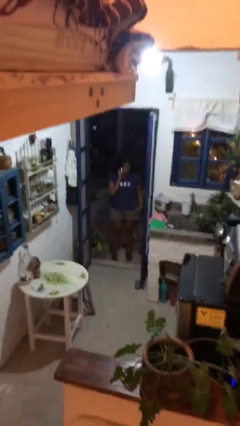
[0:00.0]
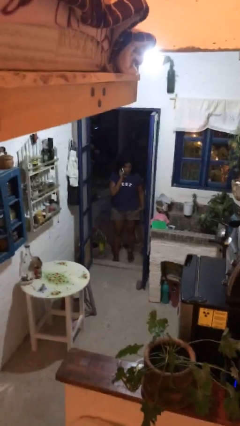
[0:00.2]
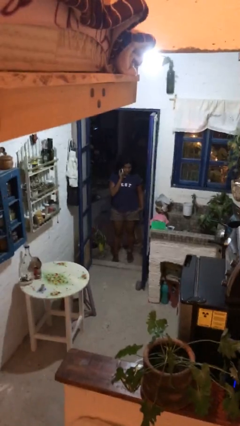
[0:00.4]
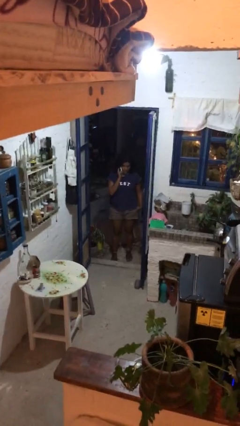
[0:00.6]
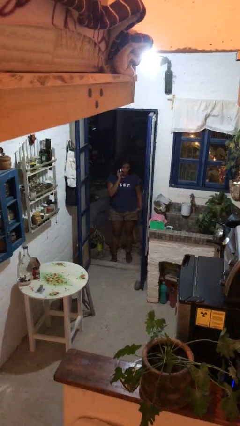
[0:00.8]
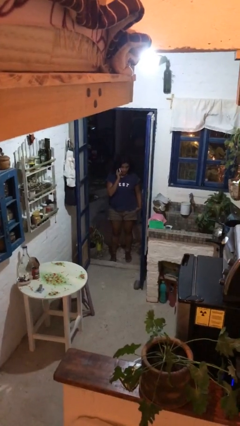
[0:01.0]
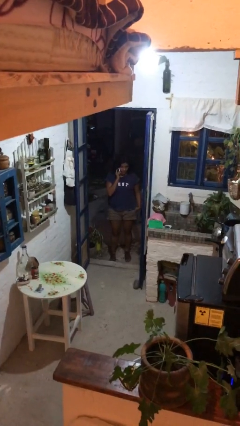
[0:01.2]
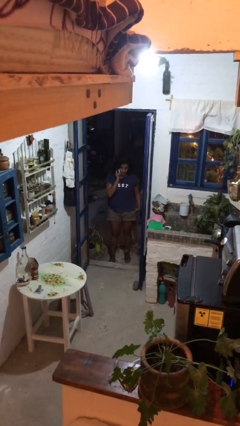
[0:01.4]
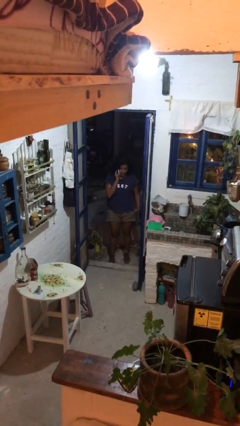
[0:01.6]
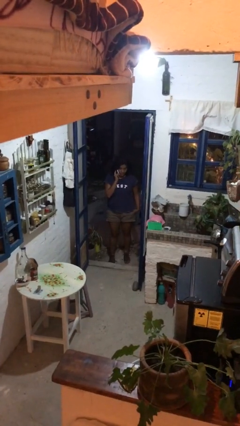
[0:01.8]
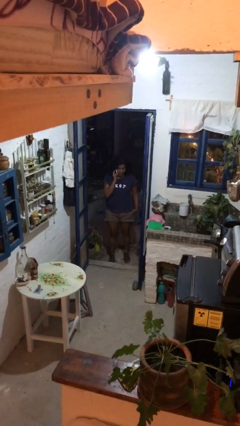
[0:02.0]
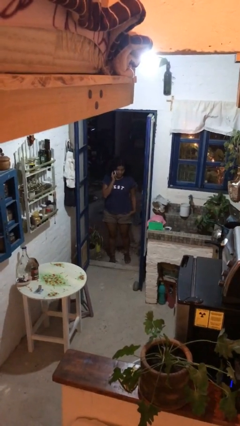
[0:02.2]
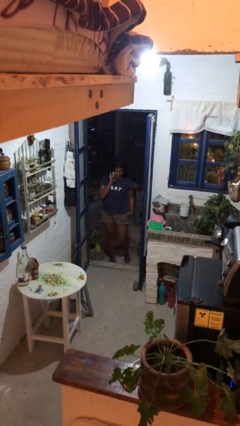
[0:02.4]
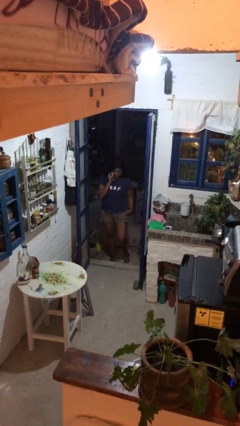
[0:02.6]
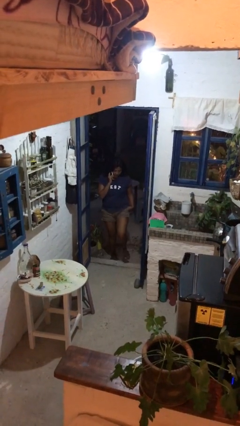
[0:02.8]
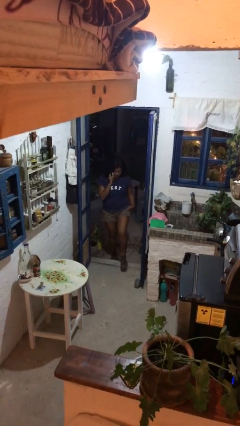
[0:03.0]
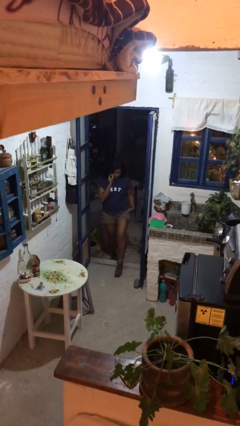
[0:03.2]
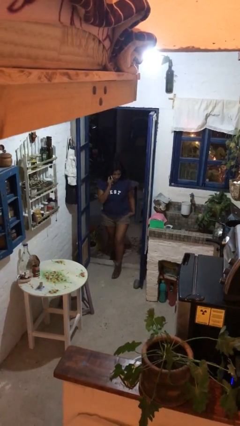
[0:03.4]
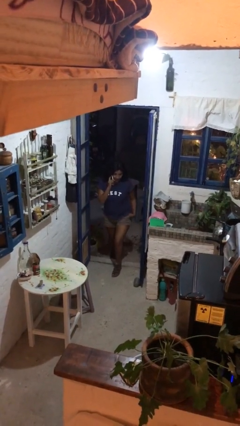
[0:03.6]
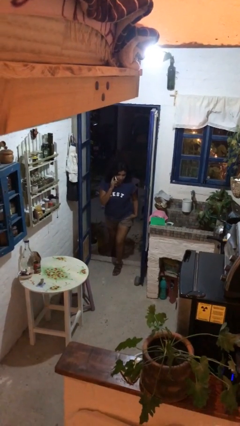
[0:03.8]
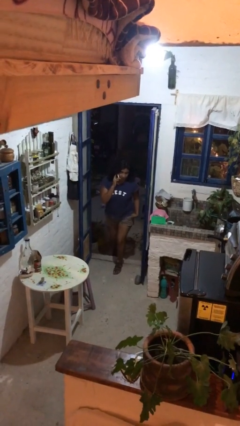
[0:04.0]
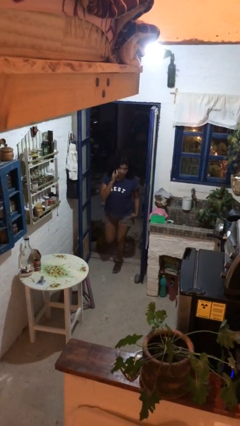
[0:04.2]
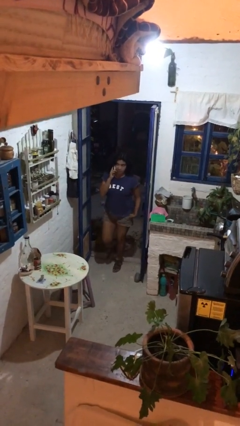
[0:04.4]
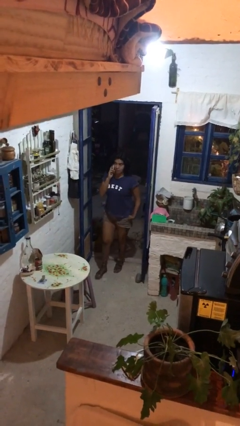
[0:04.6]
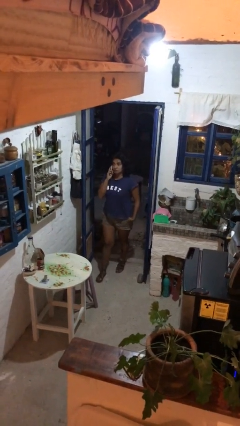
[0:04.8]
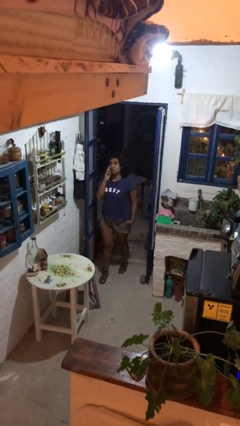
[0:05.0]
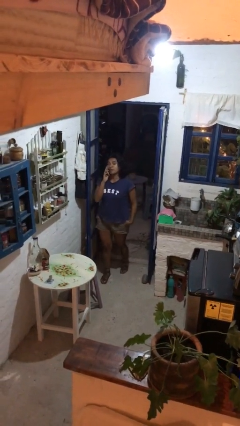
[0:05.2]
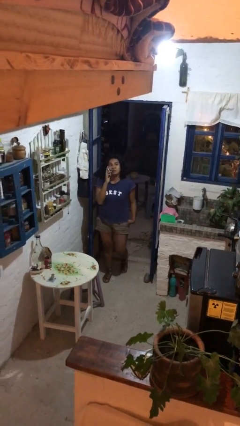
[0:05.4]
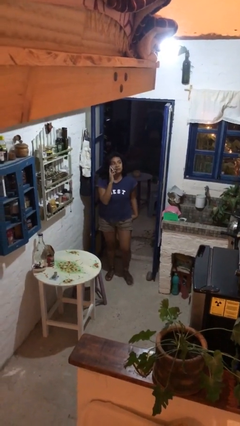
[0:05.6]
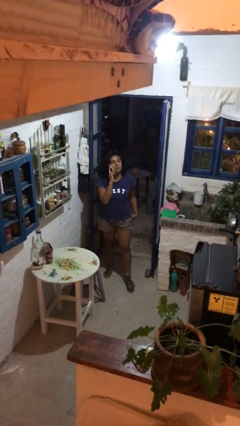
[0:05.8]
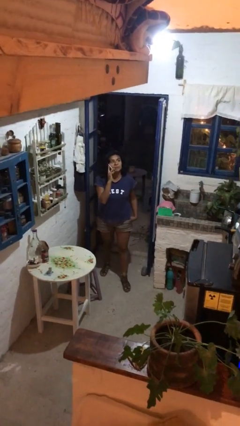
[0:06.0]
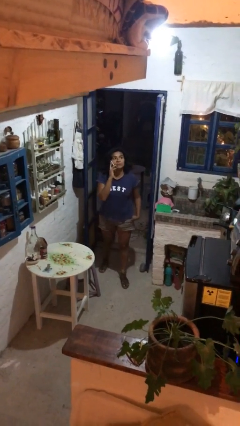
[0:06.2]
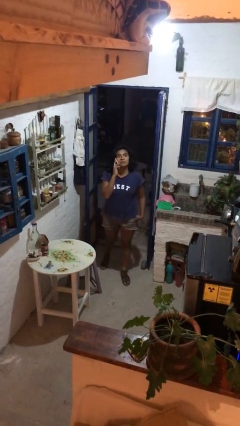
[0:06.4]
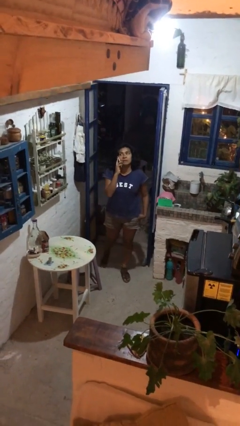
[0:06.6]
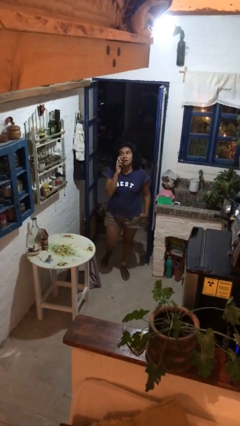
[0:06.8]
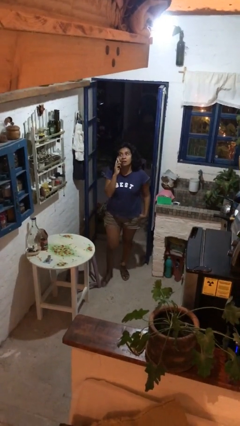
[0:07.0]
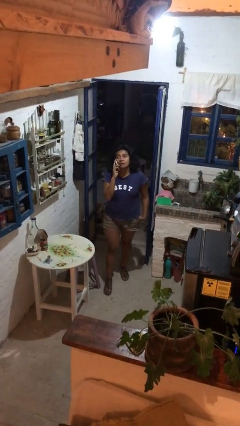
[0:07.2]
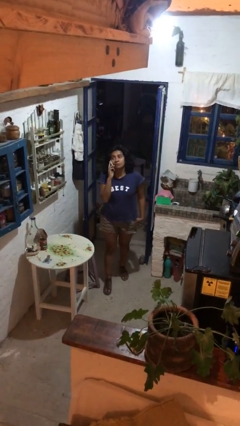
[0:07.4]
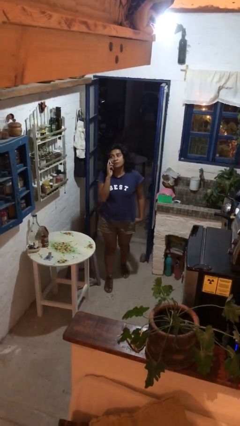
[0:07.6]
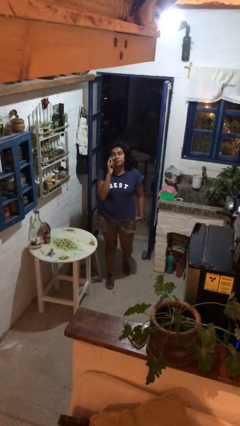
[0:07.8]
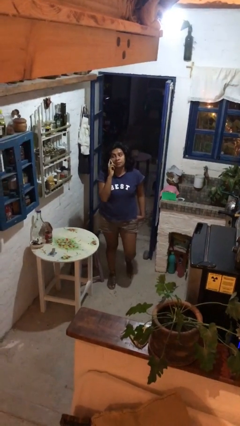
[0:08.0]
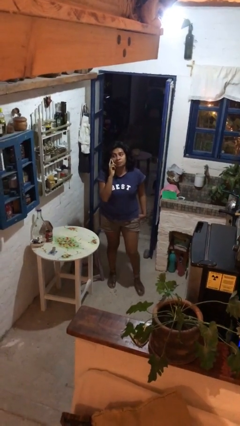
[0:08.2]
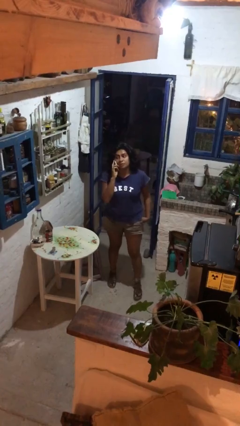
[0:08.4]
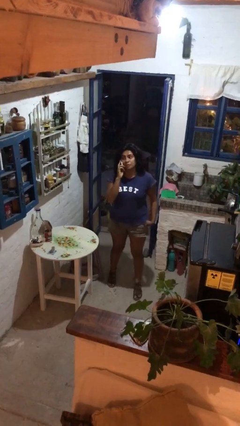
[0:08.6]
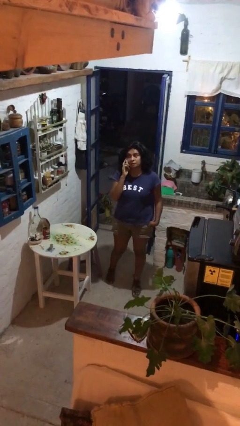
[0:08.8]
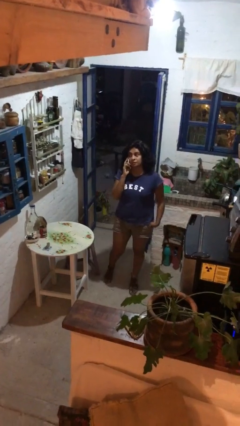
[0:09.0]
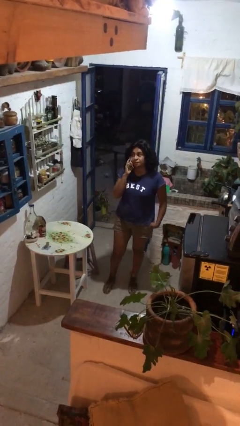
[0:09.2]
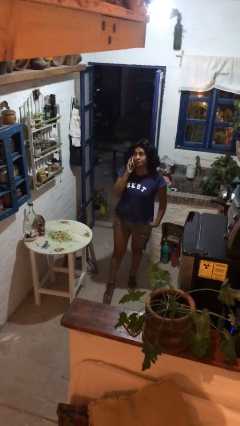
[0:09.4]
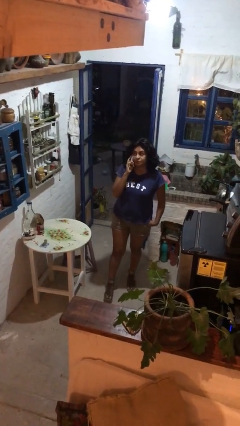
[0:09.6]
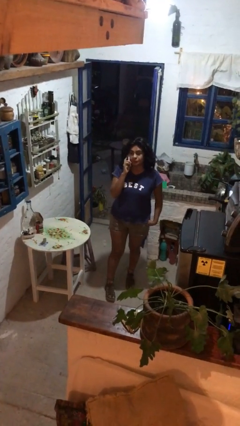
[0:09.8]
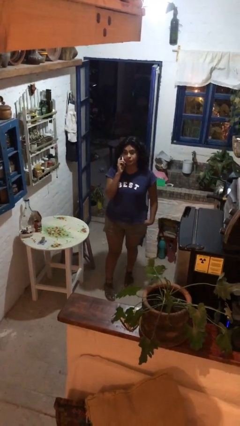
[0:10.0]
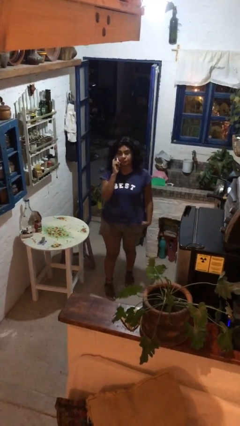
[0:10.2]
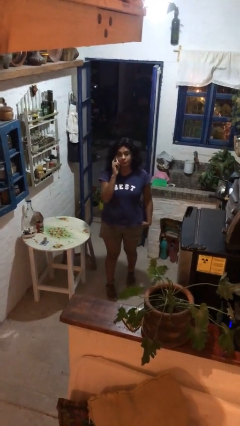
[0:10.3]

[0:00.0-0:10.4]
person enters scene through structure

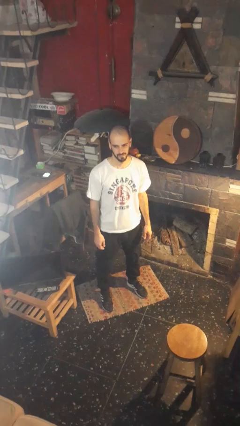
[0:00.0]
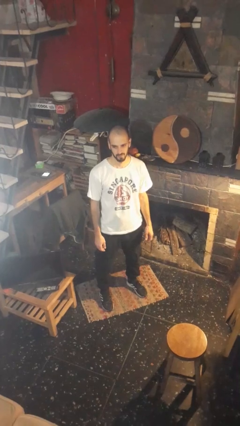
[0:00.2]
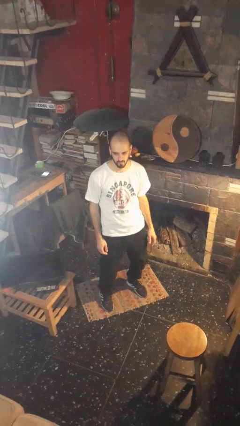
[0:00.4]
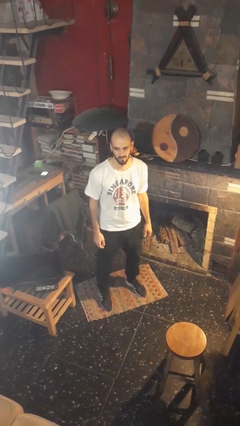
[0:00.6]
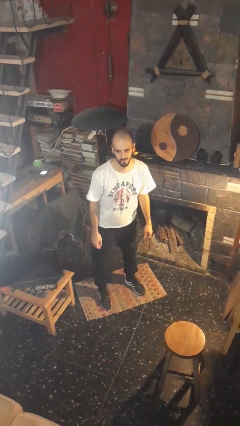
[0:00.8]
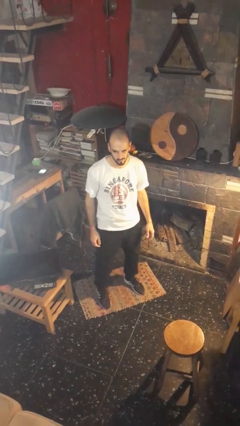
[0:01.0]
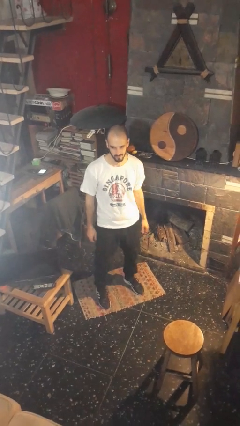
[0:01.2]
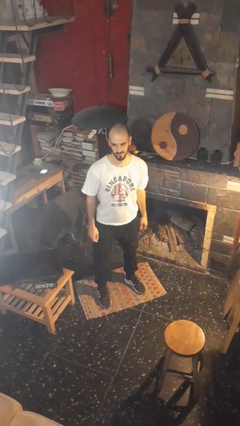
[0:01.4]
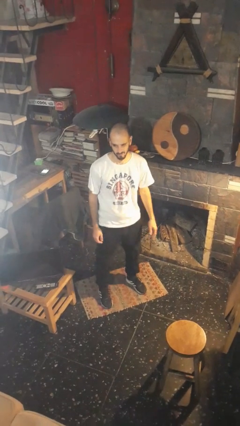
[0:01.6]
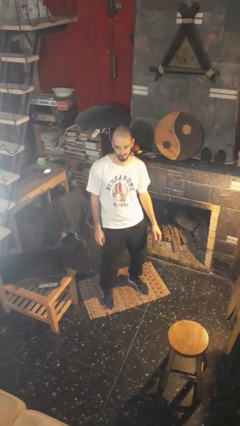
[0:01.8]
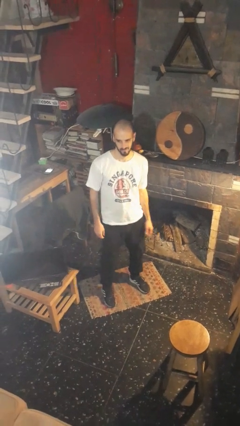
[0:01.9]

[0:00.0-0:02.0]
person wiggles hips

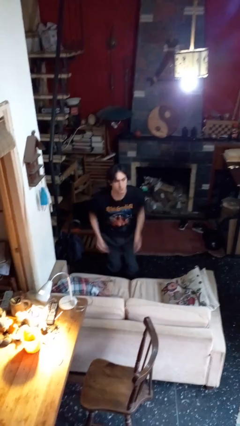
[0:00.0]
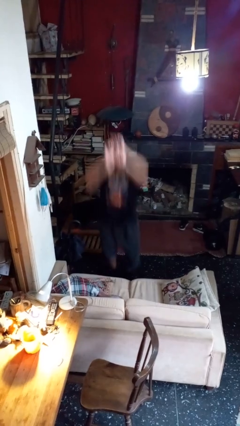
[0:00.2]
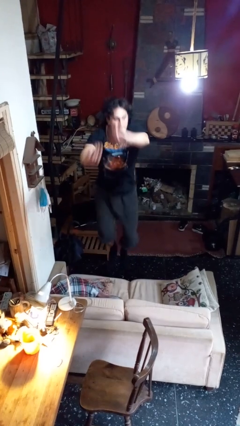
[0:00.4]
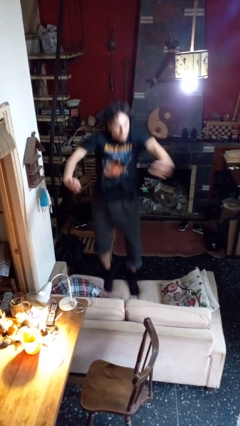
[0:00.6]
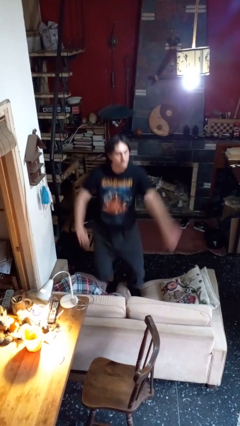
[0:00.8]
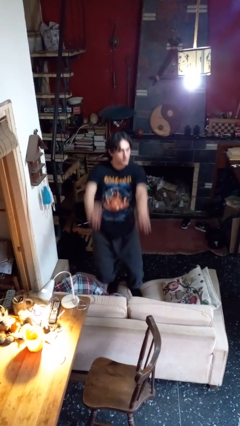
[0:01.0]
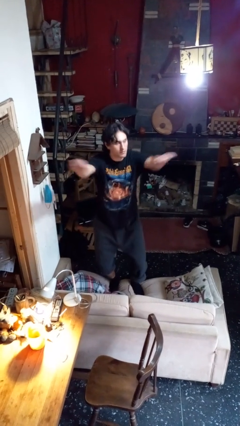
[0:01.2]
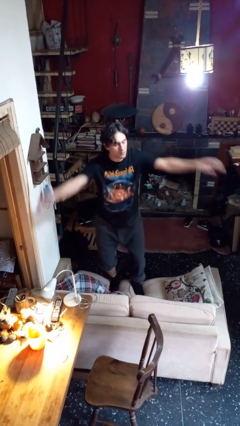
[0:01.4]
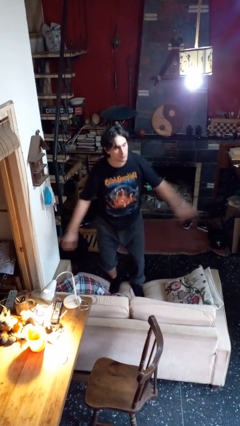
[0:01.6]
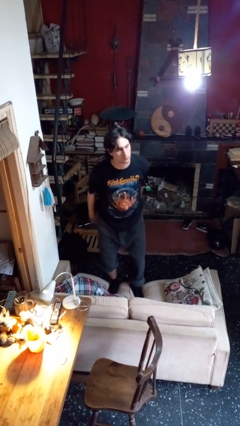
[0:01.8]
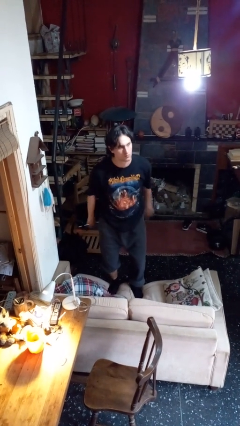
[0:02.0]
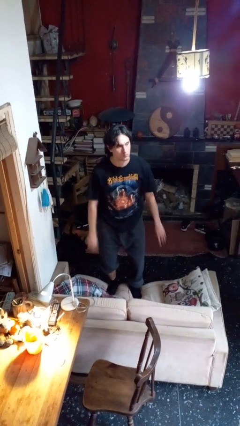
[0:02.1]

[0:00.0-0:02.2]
person climbs on couch

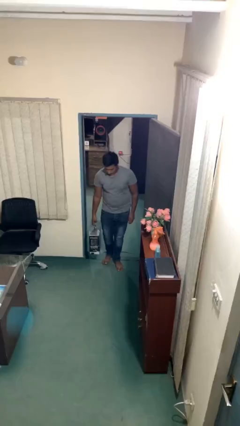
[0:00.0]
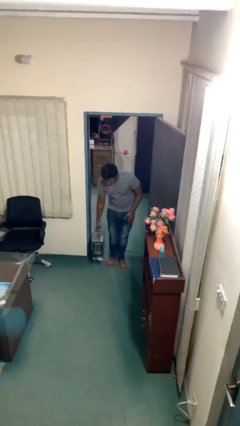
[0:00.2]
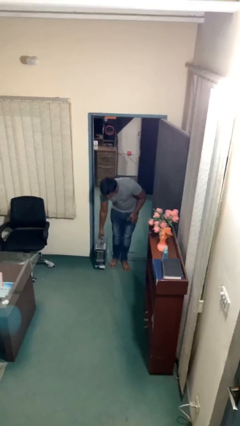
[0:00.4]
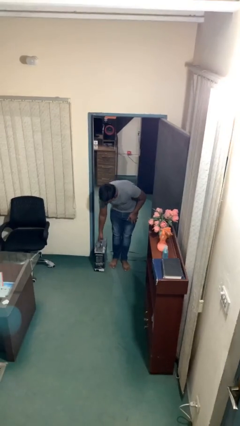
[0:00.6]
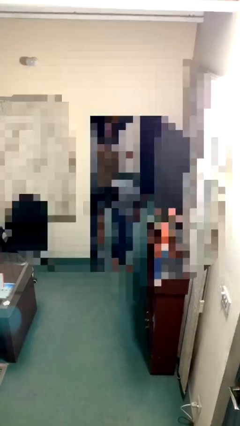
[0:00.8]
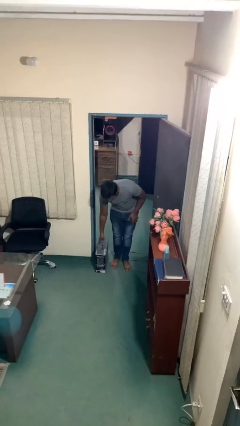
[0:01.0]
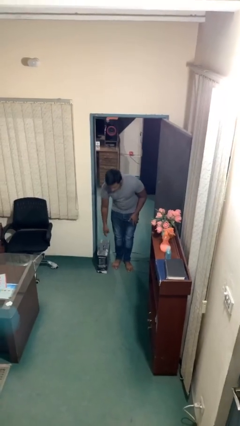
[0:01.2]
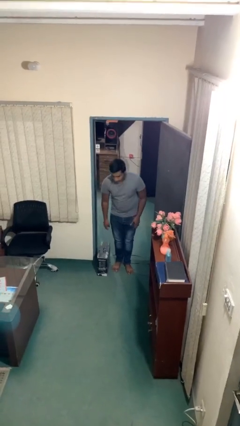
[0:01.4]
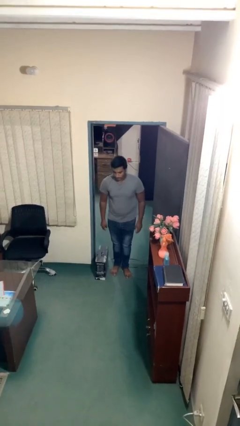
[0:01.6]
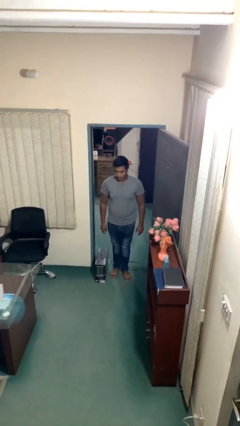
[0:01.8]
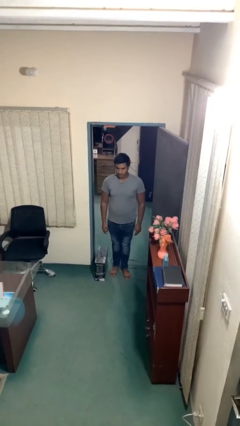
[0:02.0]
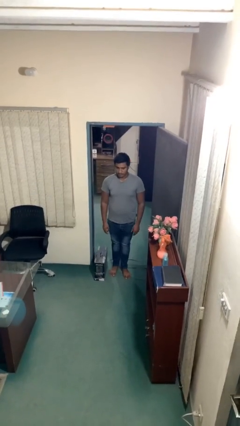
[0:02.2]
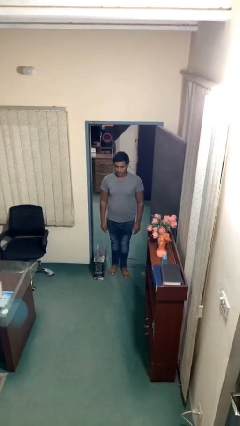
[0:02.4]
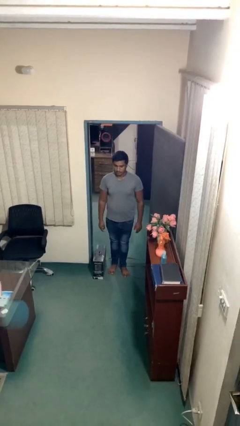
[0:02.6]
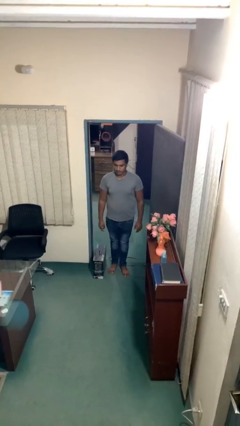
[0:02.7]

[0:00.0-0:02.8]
person puts down object on floor
